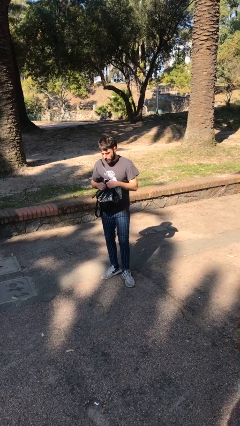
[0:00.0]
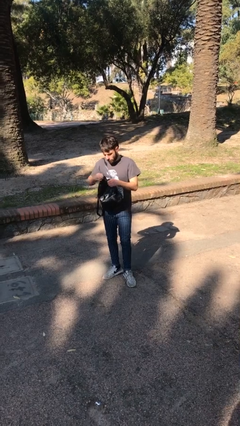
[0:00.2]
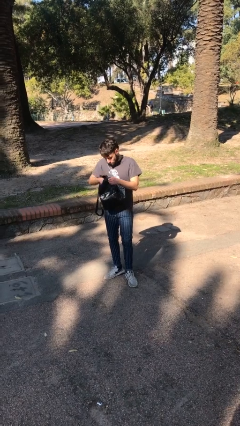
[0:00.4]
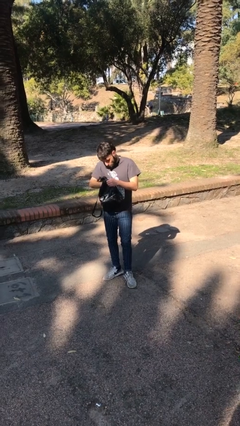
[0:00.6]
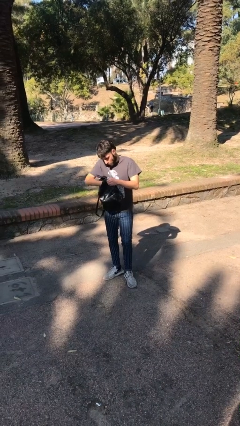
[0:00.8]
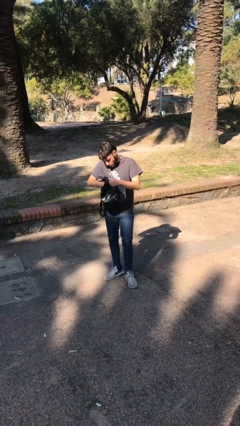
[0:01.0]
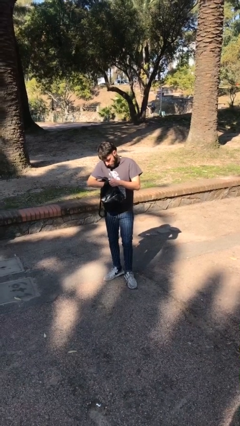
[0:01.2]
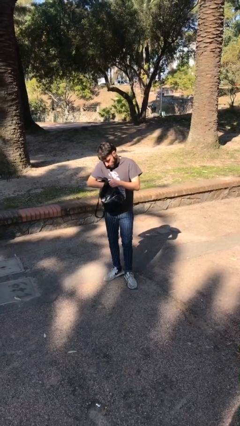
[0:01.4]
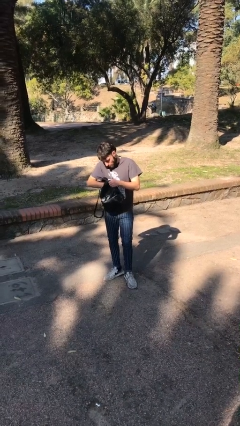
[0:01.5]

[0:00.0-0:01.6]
person searches in backpack

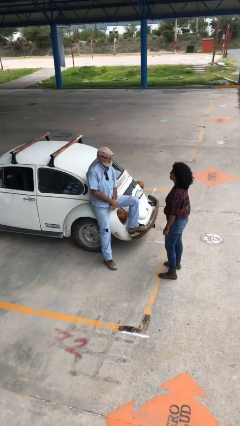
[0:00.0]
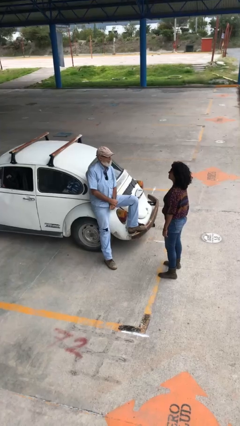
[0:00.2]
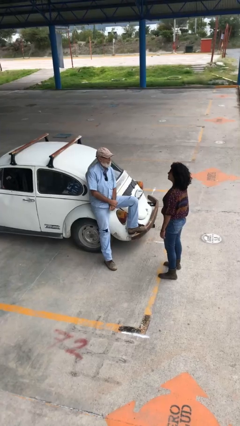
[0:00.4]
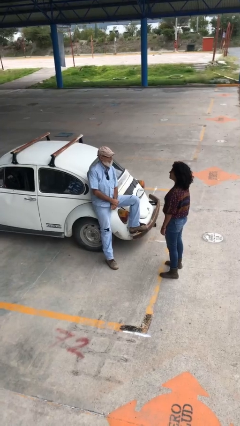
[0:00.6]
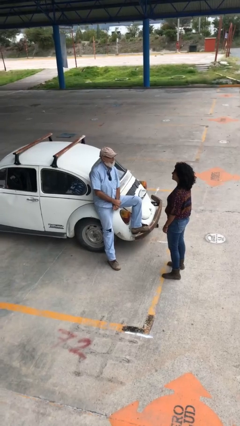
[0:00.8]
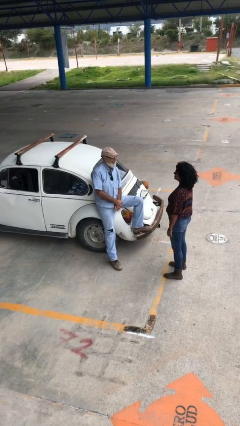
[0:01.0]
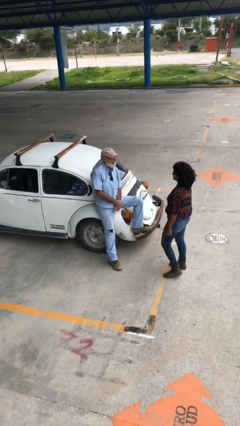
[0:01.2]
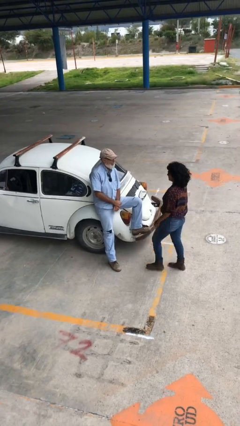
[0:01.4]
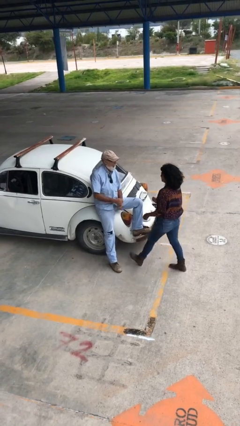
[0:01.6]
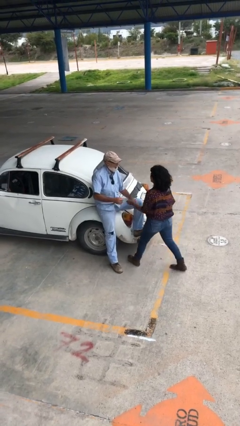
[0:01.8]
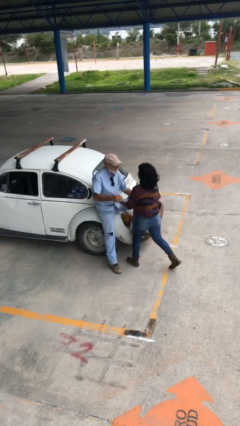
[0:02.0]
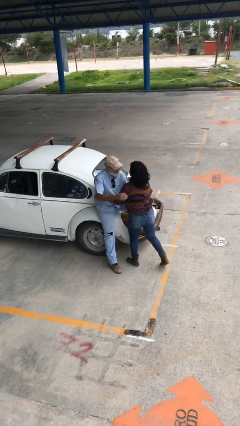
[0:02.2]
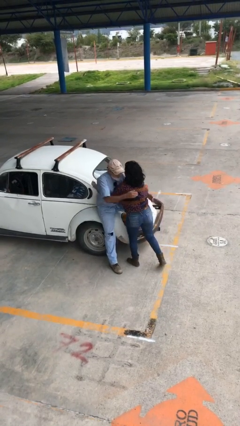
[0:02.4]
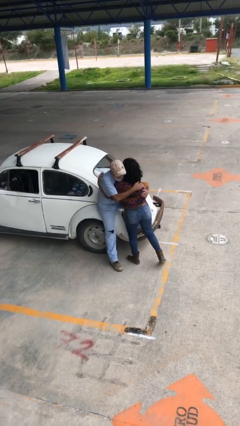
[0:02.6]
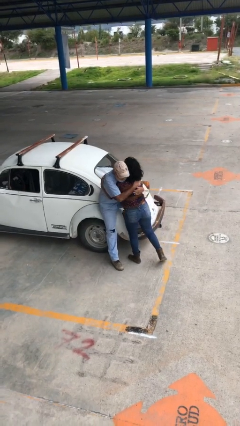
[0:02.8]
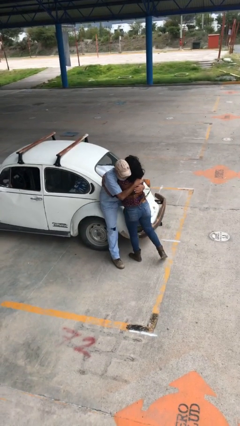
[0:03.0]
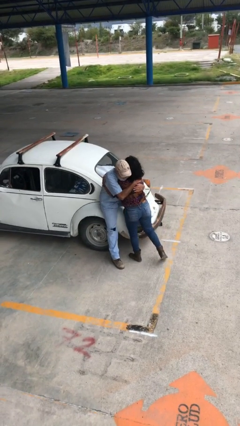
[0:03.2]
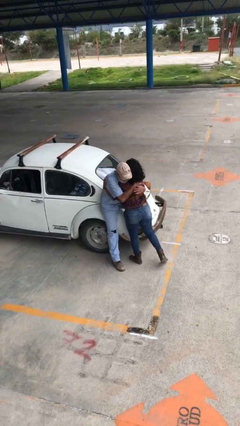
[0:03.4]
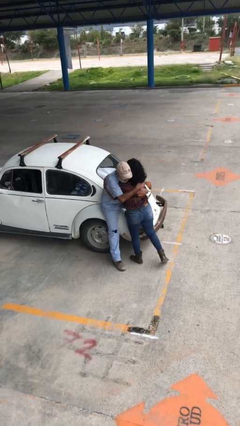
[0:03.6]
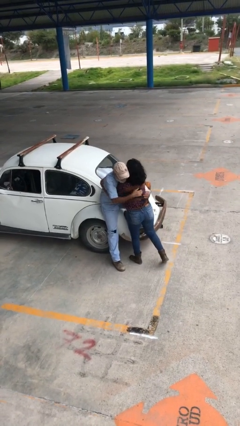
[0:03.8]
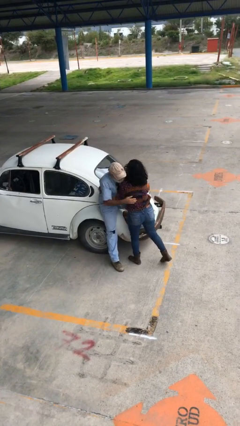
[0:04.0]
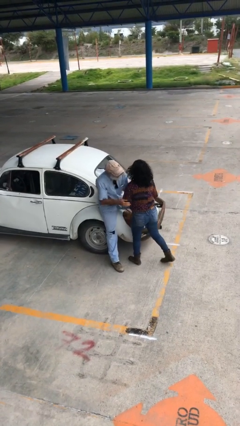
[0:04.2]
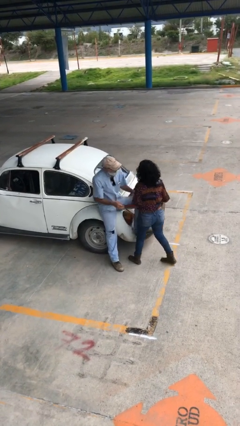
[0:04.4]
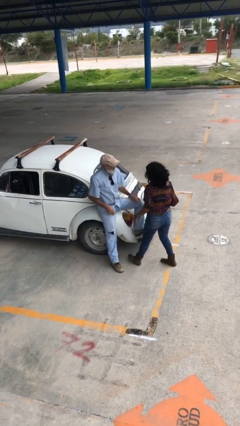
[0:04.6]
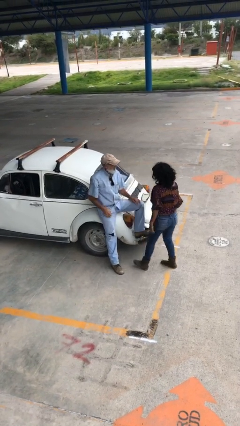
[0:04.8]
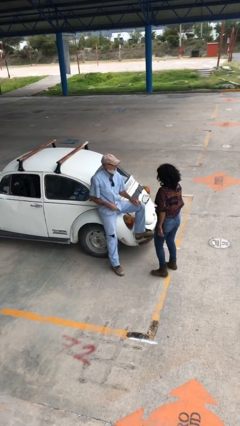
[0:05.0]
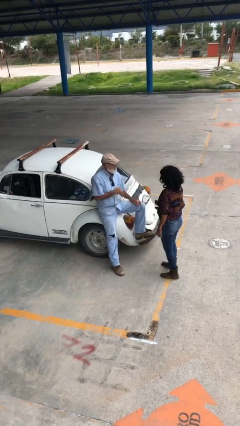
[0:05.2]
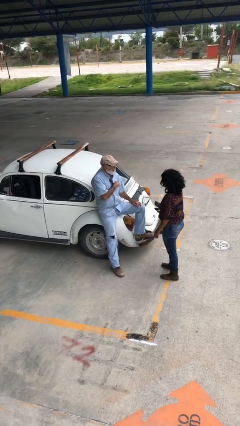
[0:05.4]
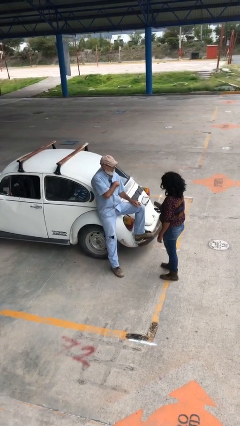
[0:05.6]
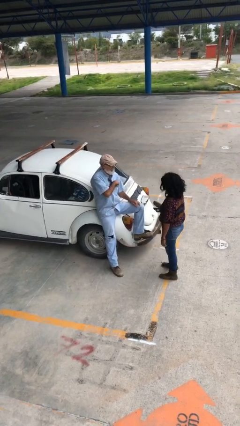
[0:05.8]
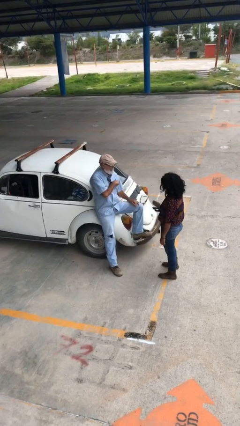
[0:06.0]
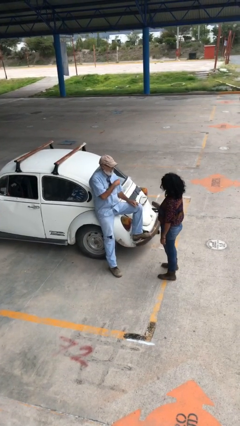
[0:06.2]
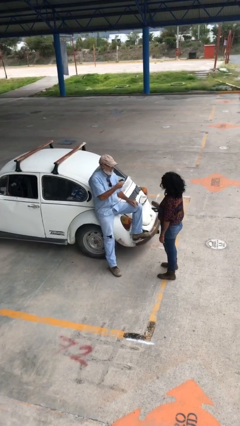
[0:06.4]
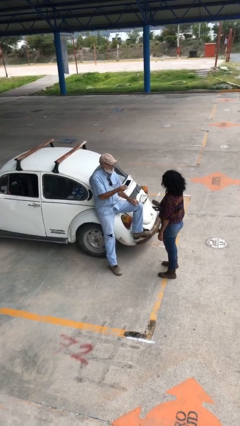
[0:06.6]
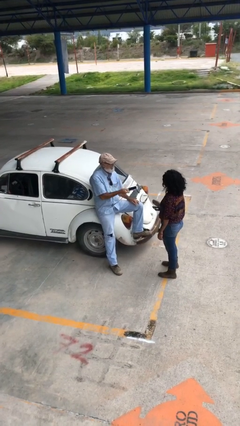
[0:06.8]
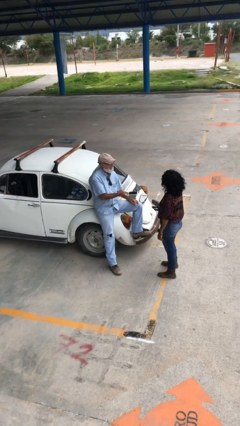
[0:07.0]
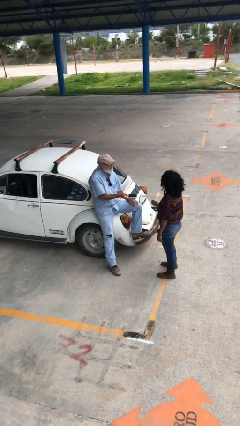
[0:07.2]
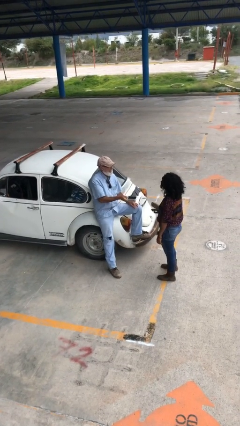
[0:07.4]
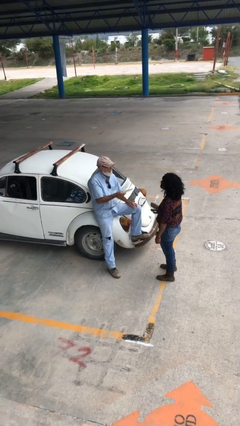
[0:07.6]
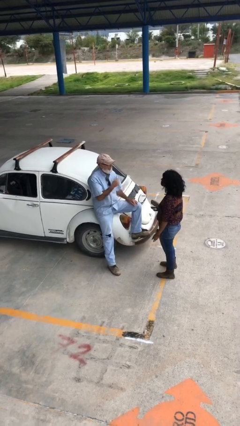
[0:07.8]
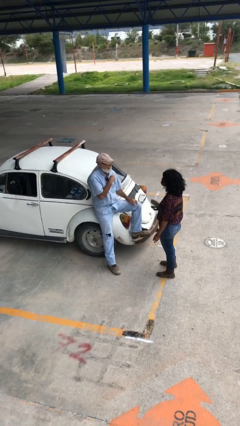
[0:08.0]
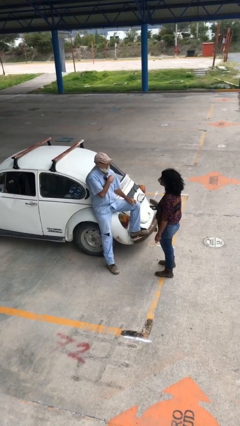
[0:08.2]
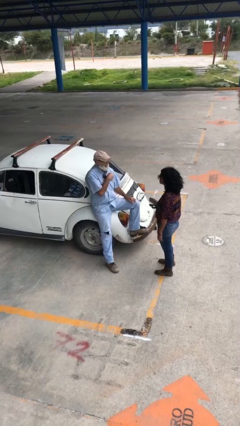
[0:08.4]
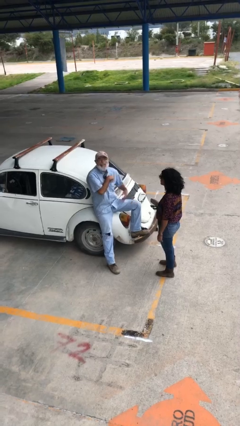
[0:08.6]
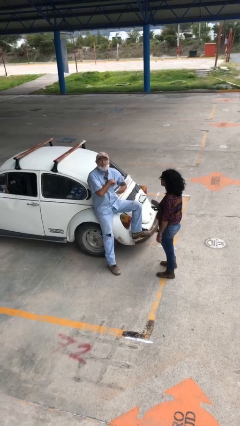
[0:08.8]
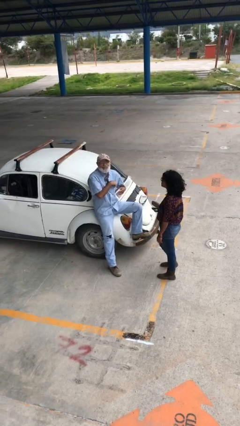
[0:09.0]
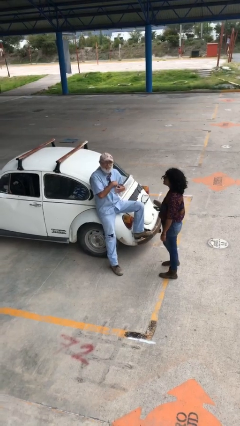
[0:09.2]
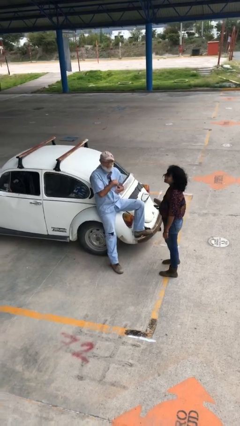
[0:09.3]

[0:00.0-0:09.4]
person embraces person

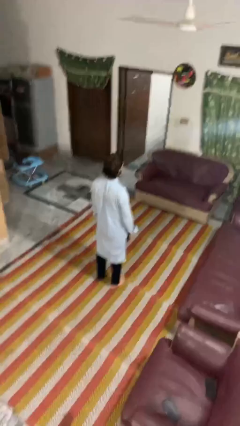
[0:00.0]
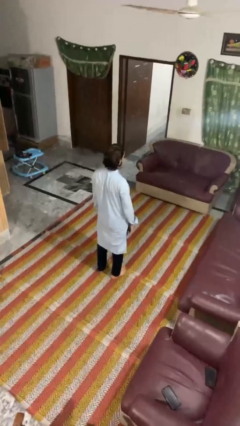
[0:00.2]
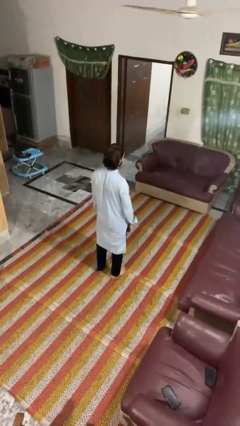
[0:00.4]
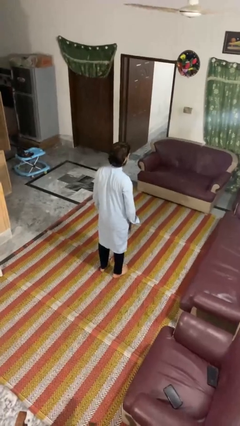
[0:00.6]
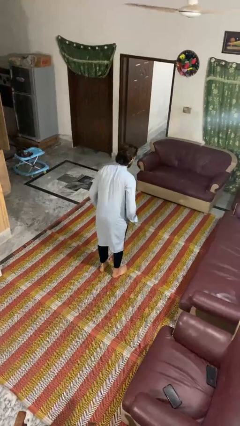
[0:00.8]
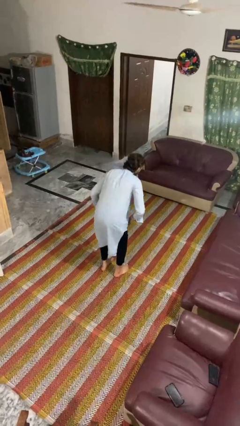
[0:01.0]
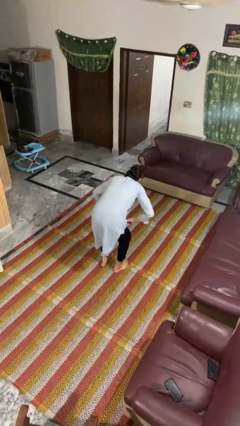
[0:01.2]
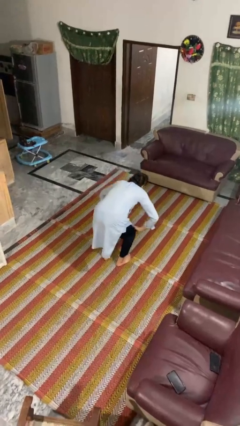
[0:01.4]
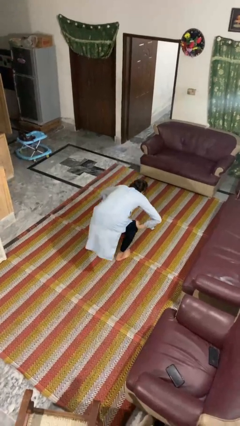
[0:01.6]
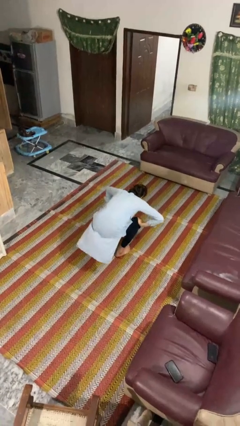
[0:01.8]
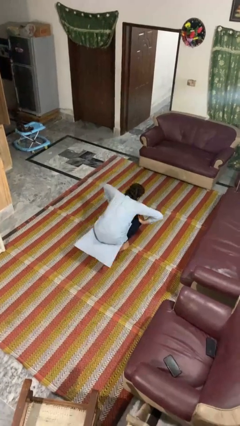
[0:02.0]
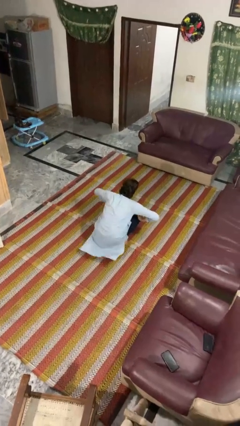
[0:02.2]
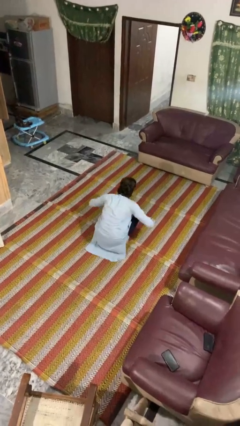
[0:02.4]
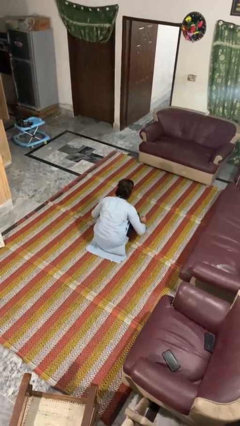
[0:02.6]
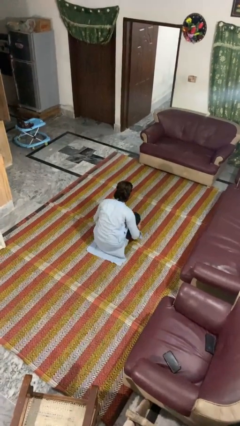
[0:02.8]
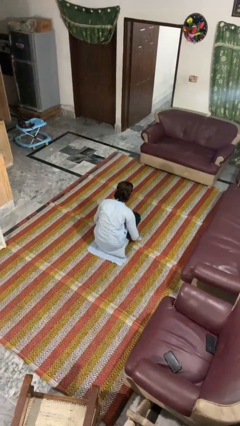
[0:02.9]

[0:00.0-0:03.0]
person squats

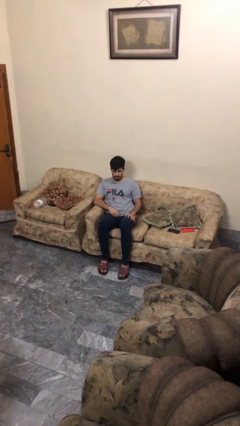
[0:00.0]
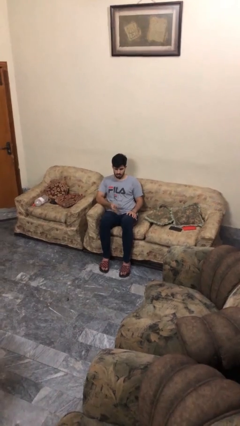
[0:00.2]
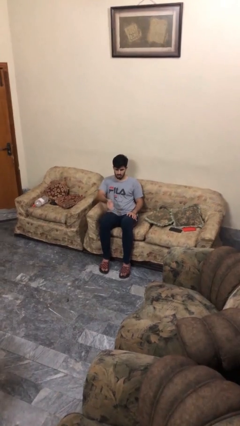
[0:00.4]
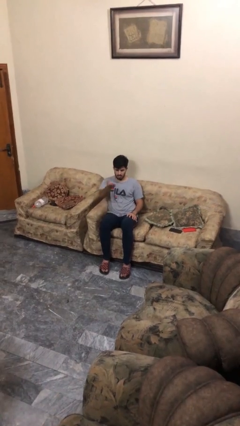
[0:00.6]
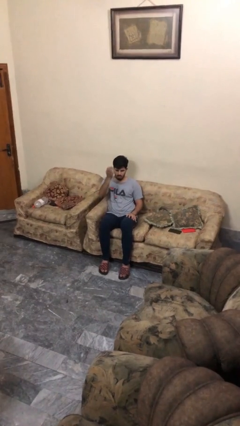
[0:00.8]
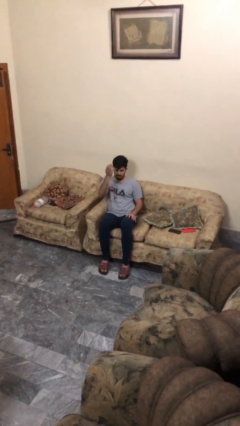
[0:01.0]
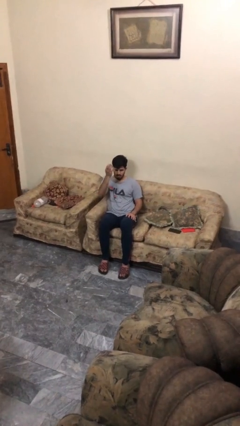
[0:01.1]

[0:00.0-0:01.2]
person gestures swipe up

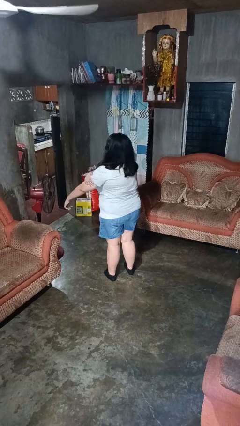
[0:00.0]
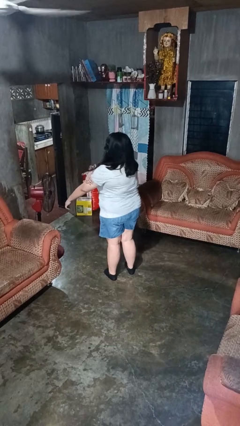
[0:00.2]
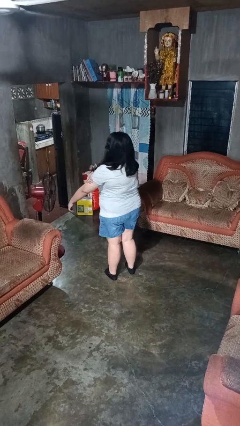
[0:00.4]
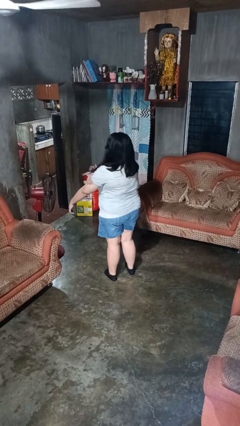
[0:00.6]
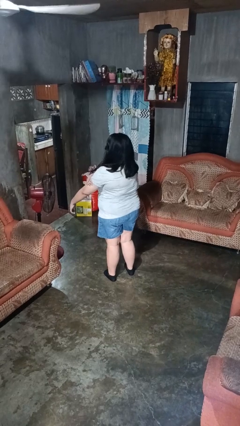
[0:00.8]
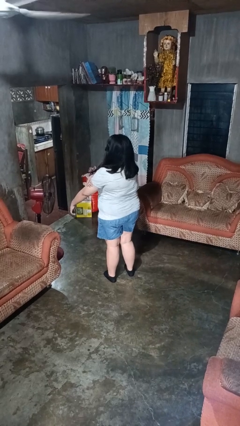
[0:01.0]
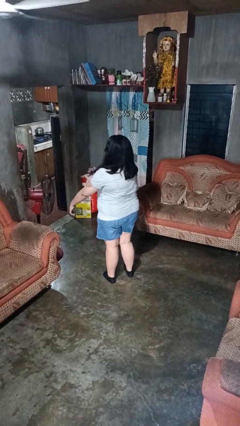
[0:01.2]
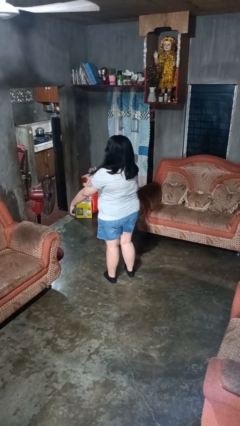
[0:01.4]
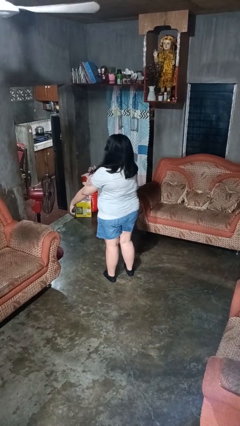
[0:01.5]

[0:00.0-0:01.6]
person swats bug

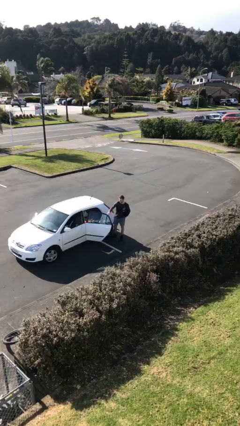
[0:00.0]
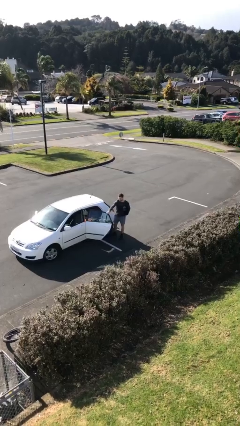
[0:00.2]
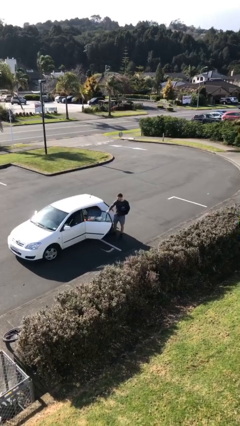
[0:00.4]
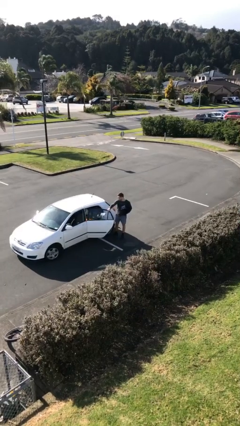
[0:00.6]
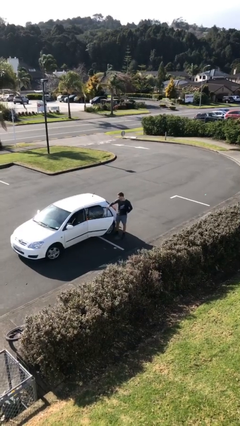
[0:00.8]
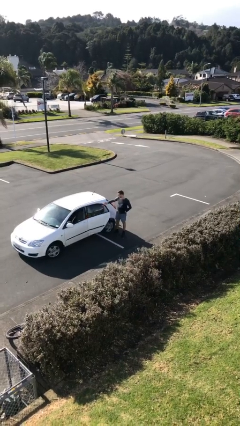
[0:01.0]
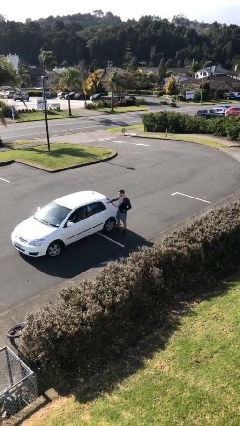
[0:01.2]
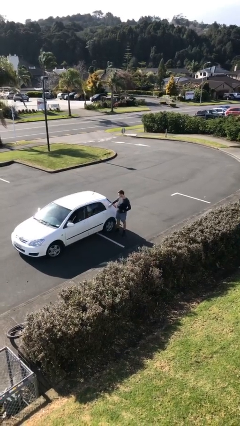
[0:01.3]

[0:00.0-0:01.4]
person closes car door
